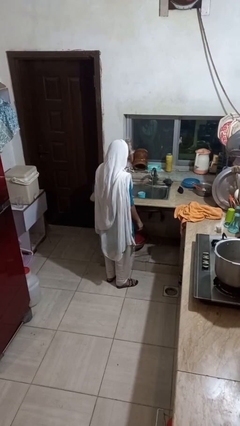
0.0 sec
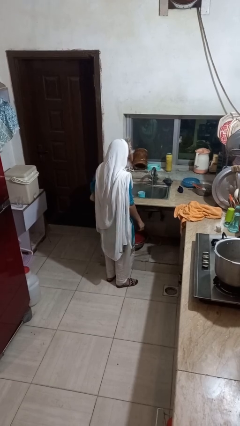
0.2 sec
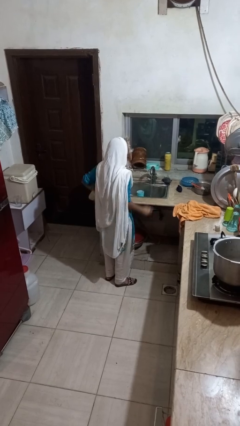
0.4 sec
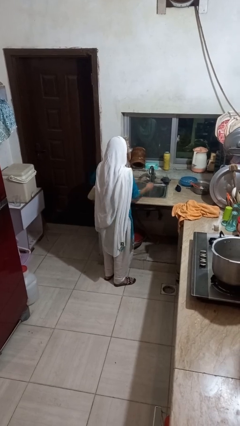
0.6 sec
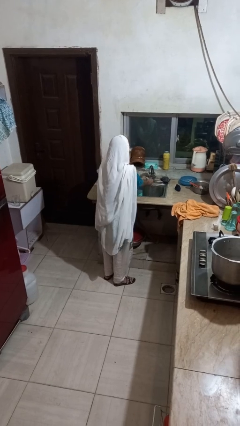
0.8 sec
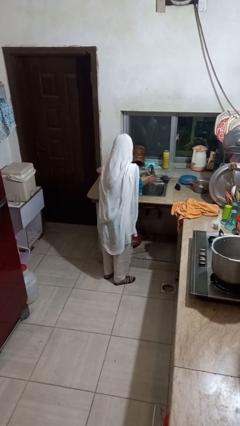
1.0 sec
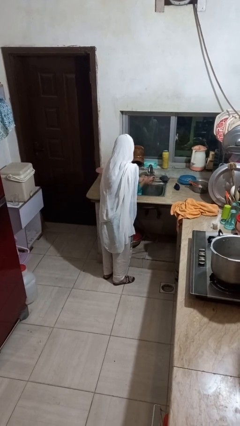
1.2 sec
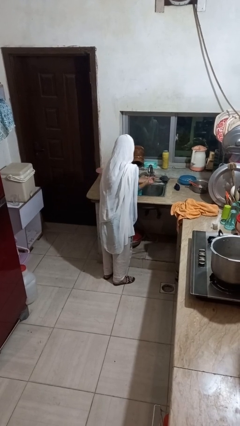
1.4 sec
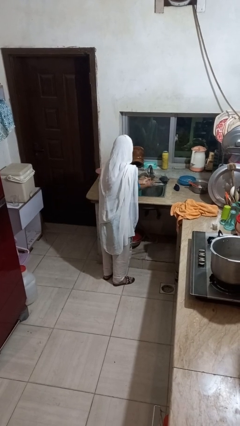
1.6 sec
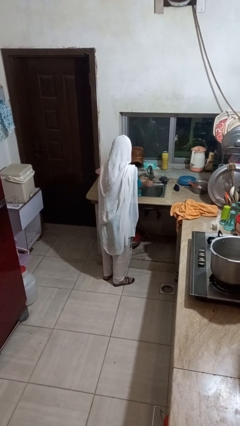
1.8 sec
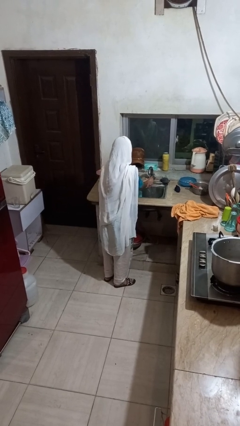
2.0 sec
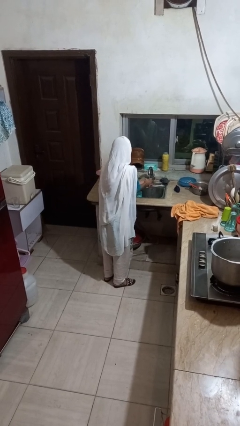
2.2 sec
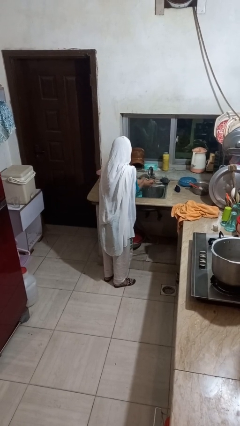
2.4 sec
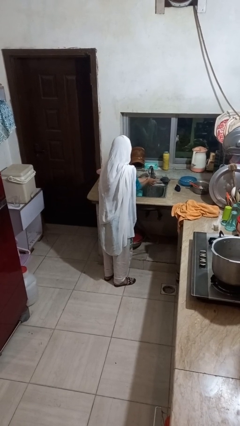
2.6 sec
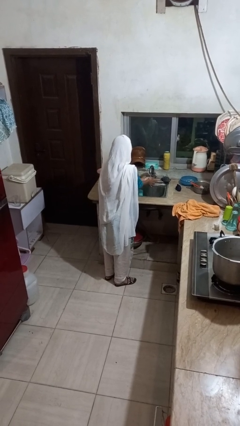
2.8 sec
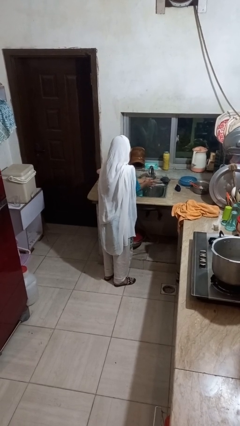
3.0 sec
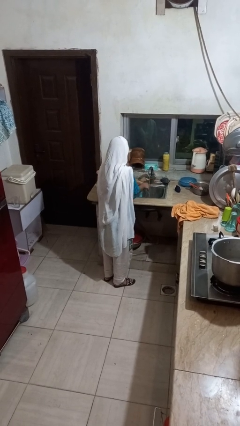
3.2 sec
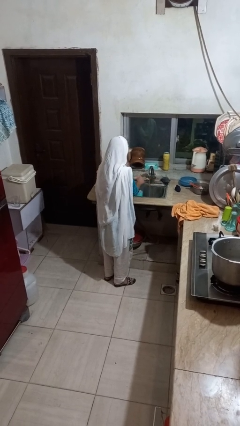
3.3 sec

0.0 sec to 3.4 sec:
person washes hands

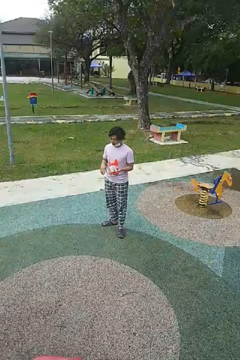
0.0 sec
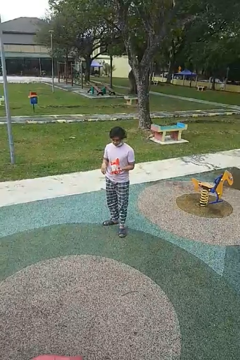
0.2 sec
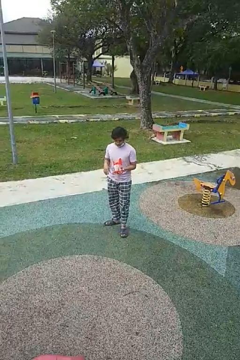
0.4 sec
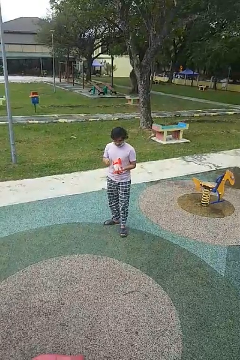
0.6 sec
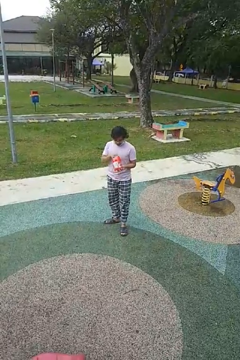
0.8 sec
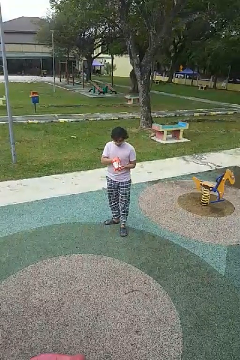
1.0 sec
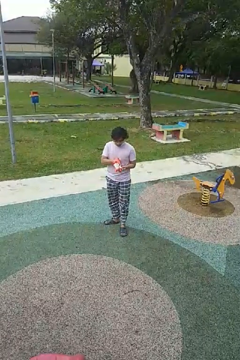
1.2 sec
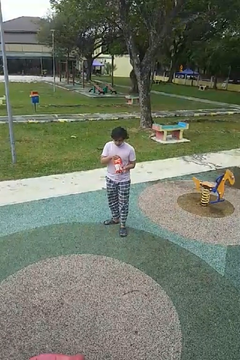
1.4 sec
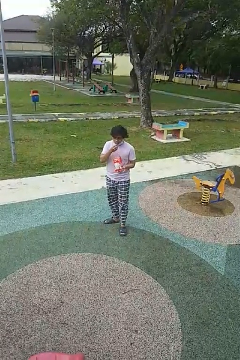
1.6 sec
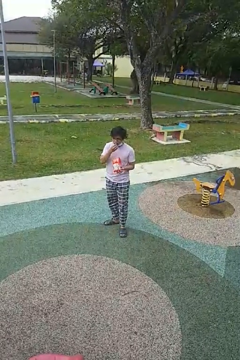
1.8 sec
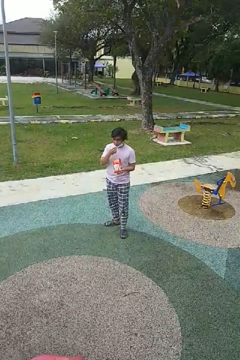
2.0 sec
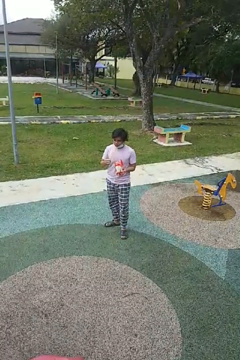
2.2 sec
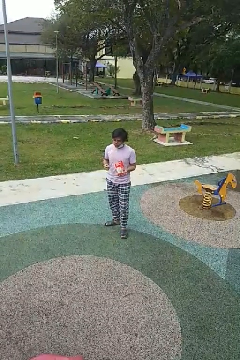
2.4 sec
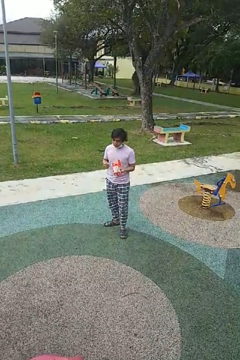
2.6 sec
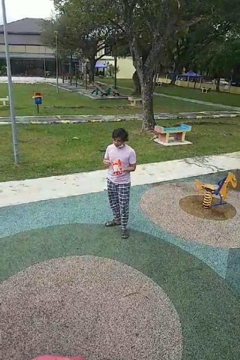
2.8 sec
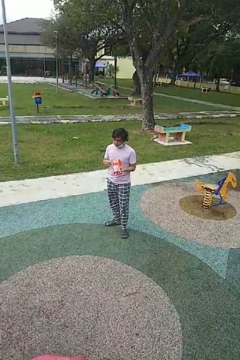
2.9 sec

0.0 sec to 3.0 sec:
person eats snack from bag

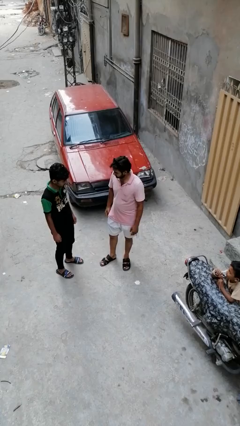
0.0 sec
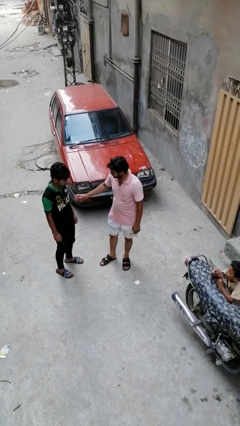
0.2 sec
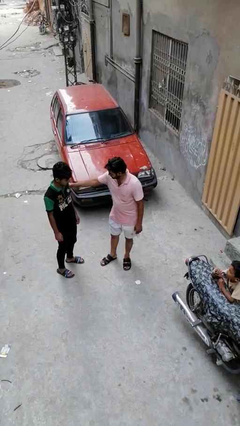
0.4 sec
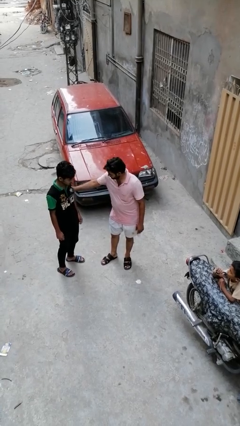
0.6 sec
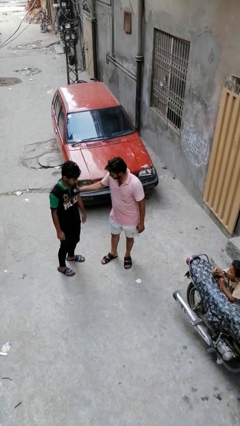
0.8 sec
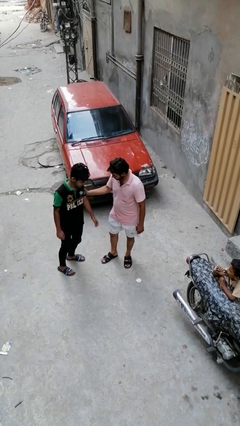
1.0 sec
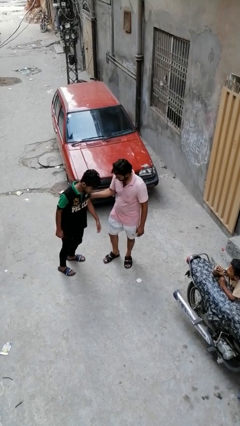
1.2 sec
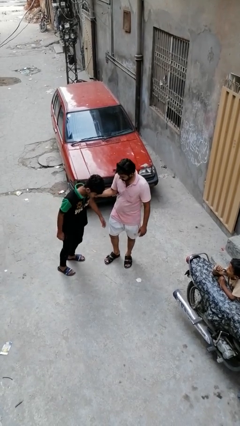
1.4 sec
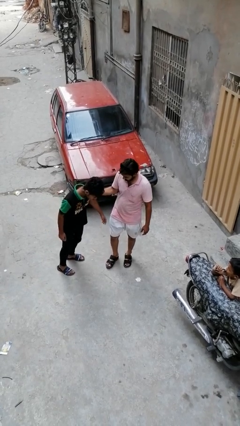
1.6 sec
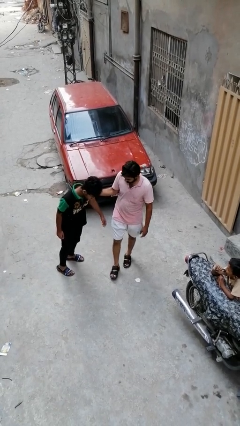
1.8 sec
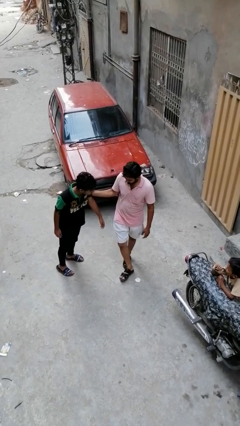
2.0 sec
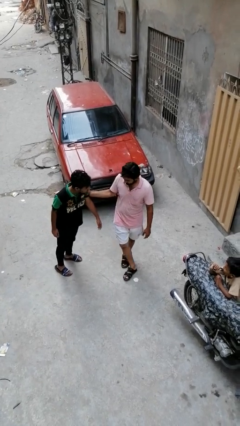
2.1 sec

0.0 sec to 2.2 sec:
person grabs person by bicep

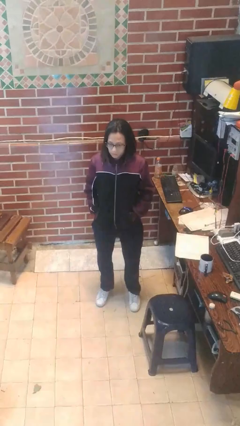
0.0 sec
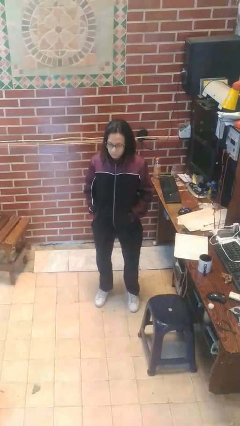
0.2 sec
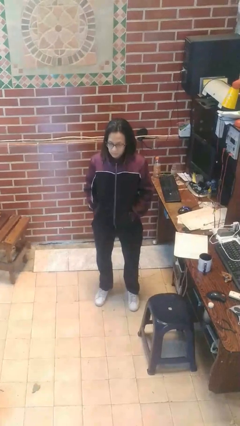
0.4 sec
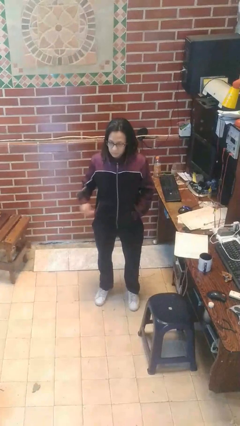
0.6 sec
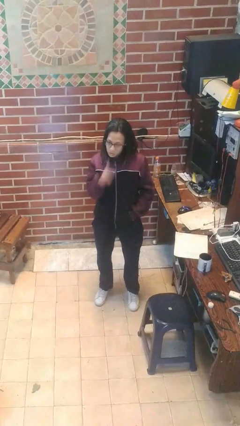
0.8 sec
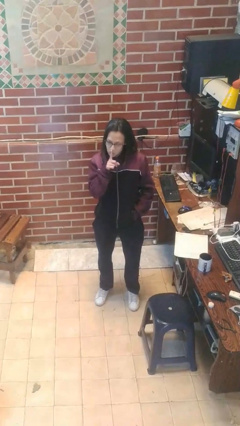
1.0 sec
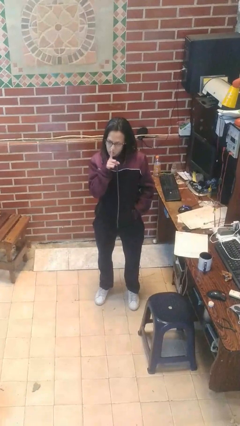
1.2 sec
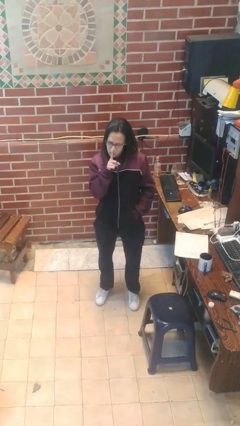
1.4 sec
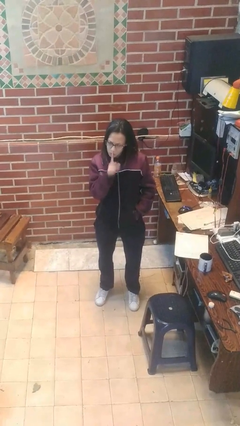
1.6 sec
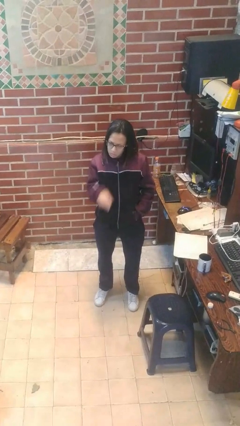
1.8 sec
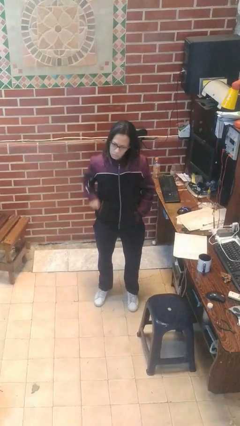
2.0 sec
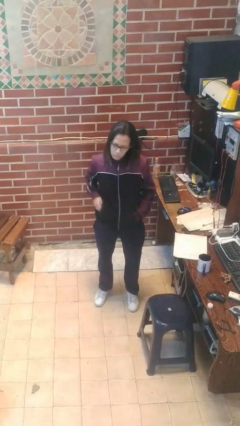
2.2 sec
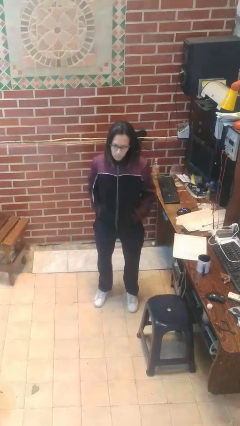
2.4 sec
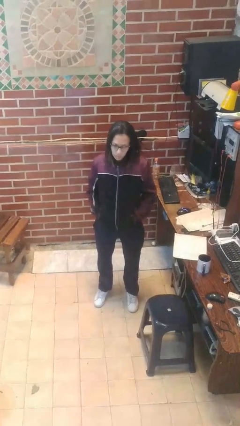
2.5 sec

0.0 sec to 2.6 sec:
person gestures be quiet

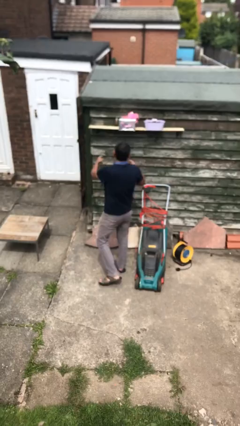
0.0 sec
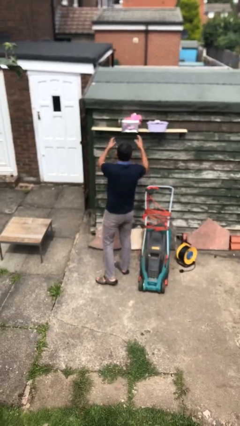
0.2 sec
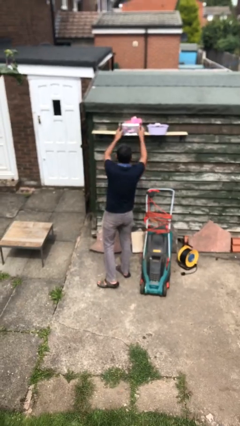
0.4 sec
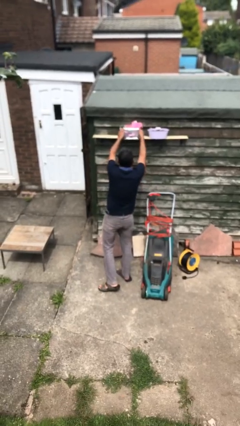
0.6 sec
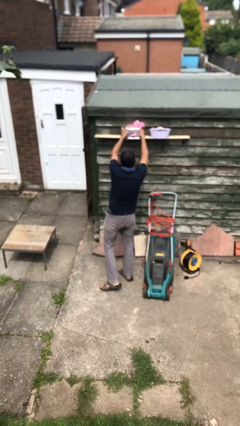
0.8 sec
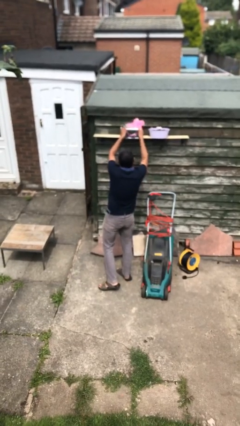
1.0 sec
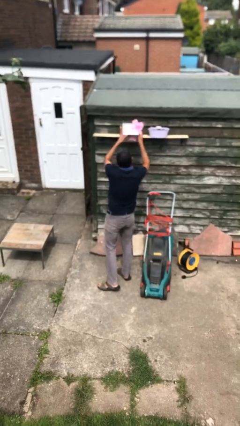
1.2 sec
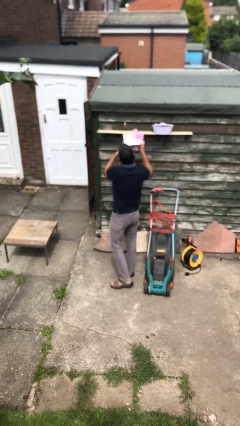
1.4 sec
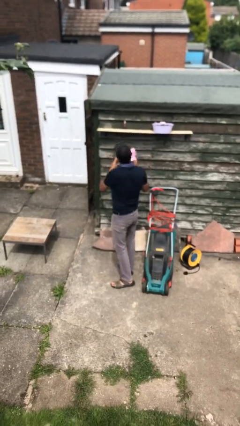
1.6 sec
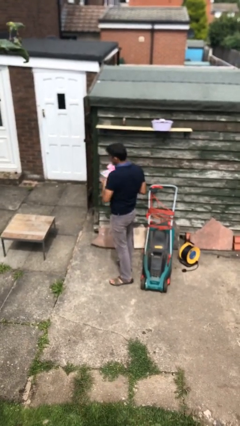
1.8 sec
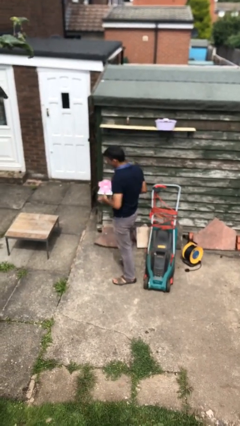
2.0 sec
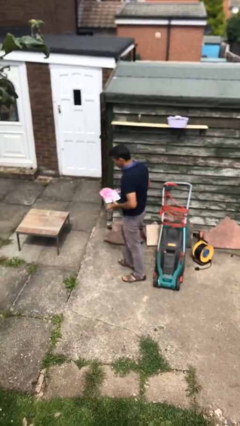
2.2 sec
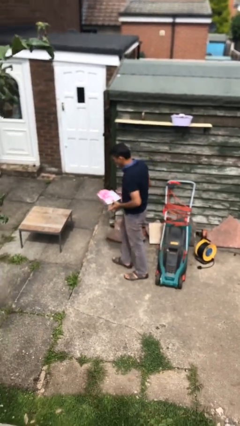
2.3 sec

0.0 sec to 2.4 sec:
person picks up object from shelf

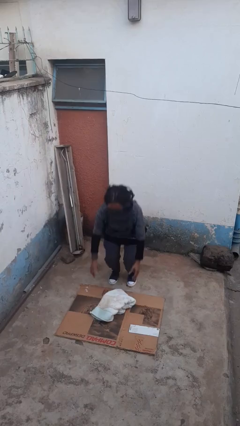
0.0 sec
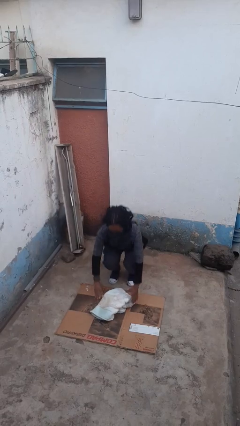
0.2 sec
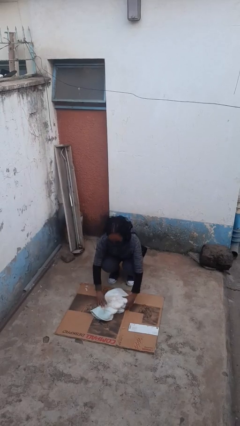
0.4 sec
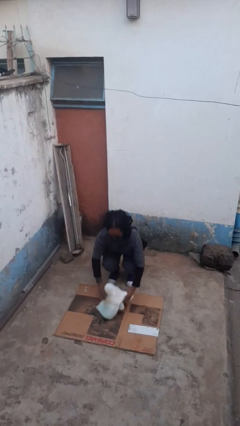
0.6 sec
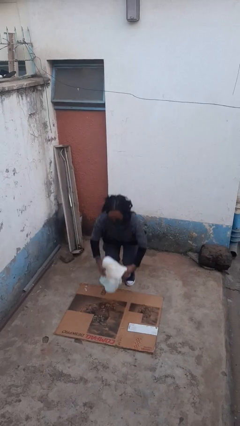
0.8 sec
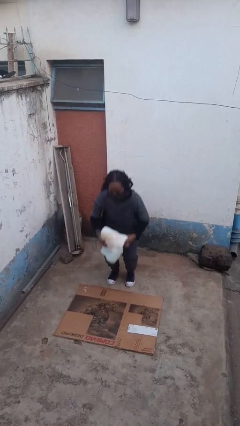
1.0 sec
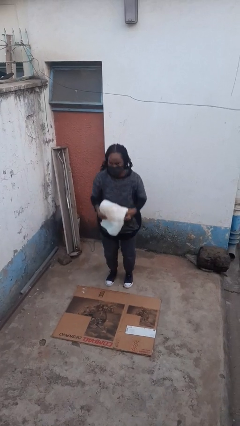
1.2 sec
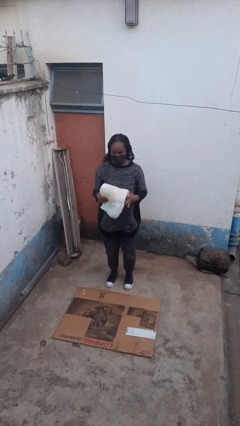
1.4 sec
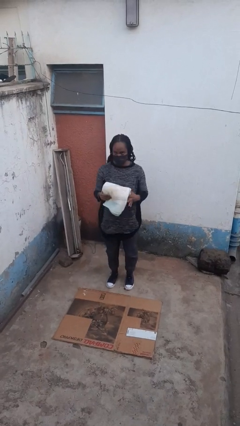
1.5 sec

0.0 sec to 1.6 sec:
person picks up object from floor

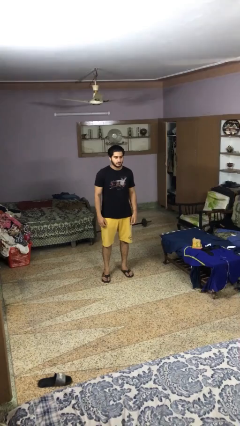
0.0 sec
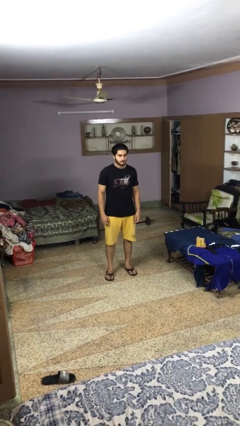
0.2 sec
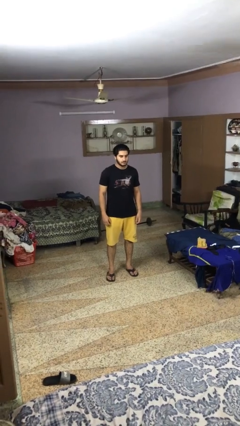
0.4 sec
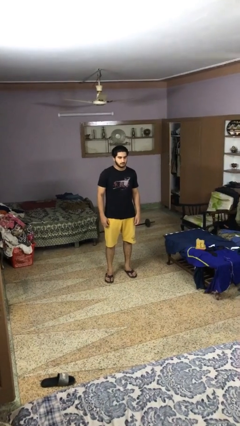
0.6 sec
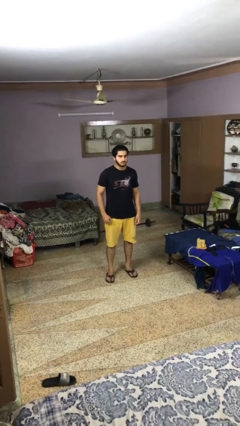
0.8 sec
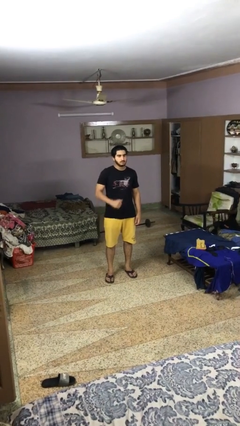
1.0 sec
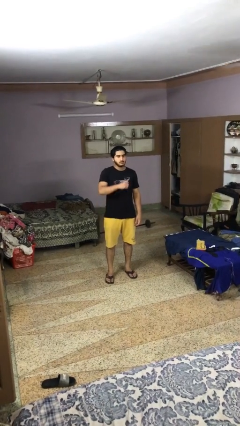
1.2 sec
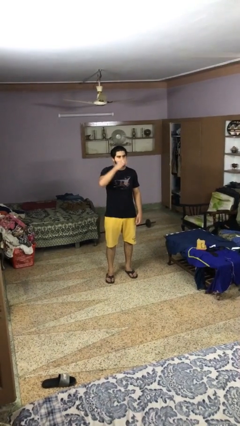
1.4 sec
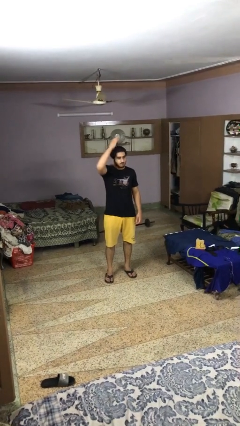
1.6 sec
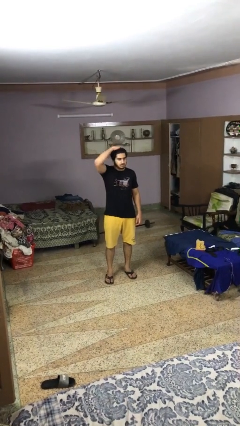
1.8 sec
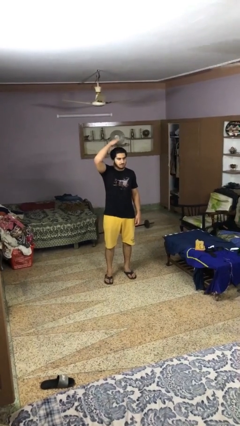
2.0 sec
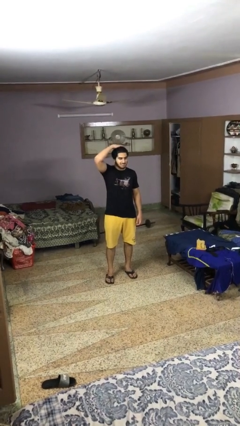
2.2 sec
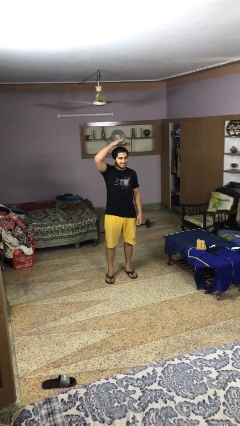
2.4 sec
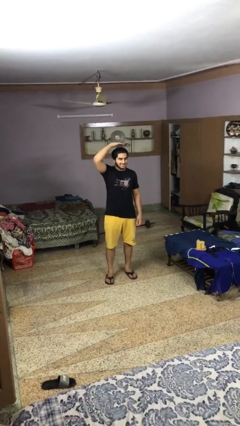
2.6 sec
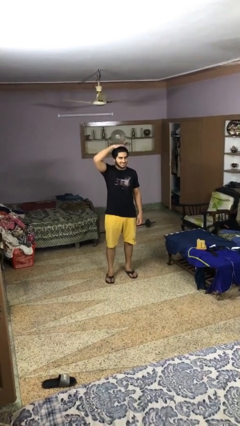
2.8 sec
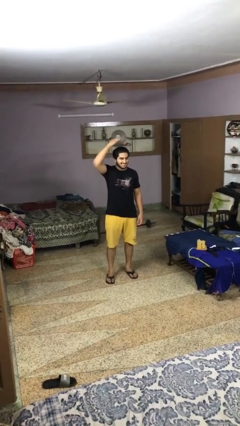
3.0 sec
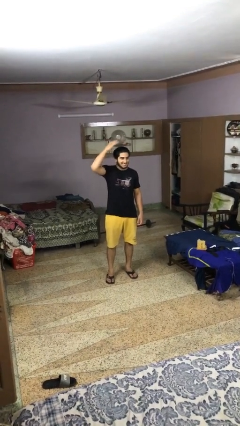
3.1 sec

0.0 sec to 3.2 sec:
person pats head
